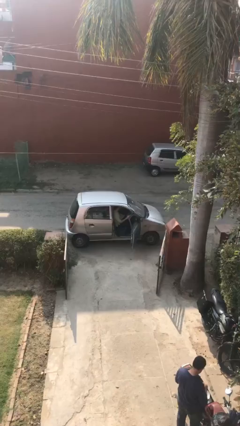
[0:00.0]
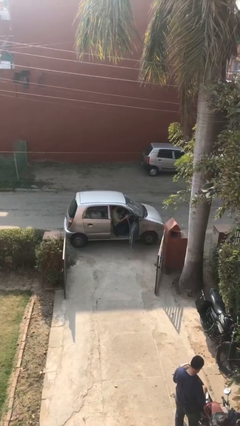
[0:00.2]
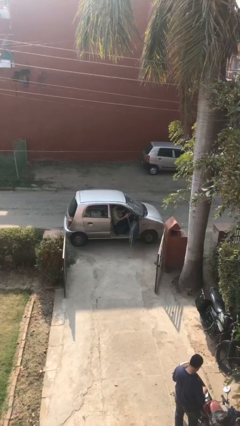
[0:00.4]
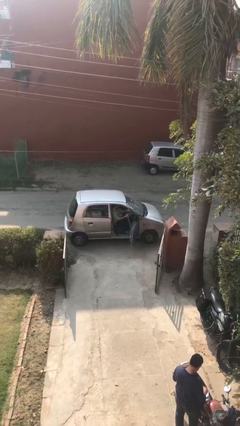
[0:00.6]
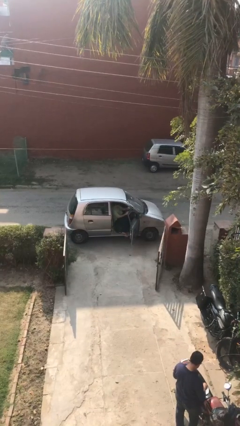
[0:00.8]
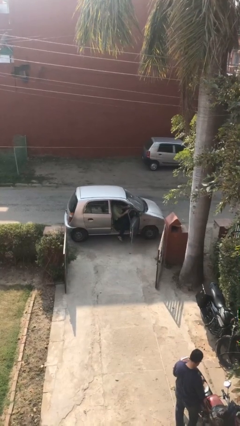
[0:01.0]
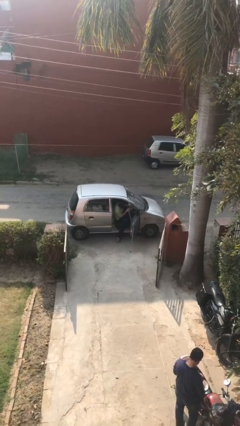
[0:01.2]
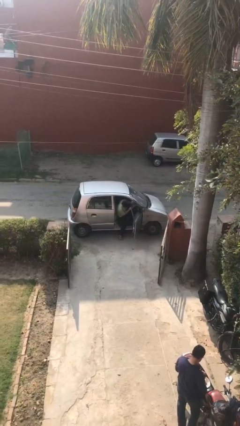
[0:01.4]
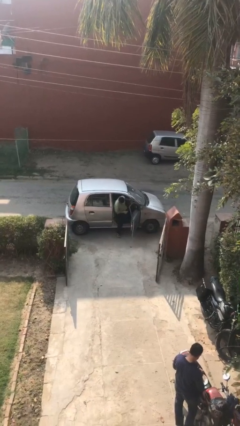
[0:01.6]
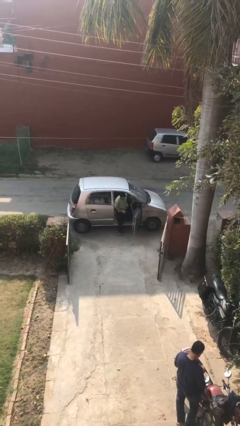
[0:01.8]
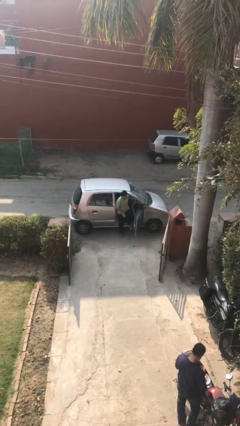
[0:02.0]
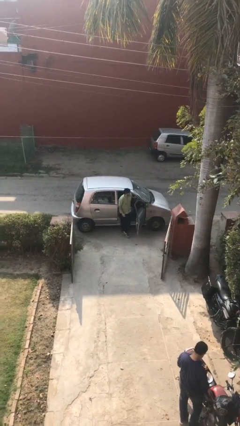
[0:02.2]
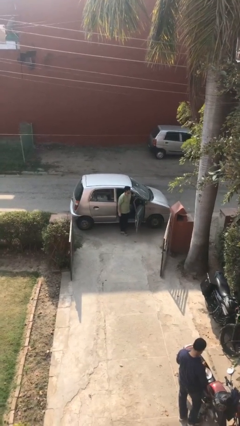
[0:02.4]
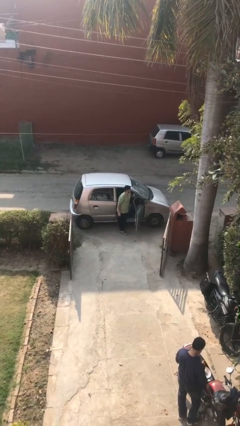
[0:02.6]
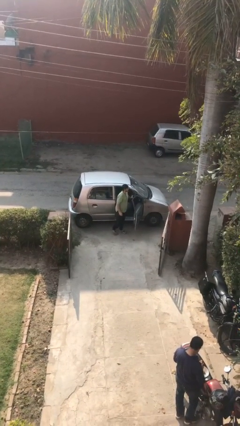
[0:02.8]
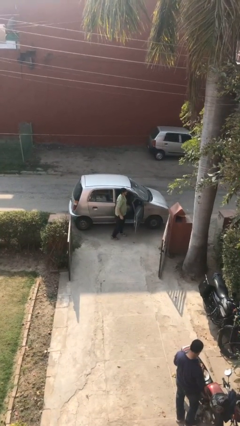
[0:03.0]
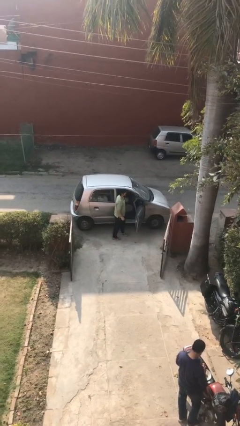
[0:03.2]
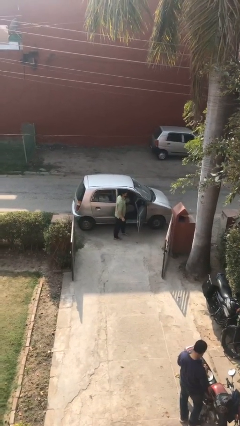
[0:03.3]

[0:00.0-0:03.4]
person exits car

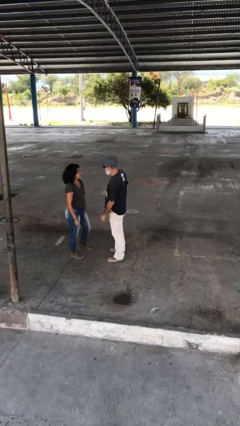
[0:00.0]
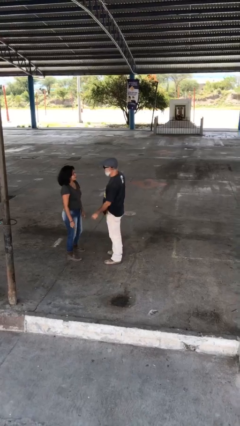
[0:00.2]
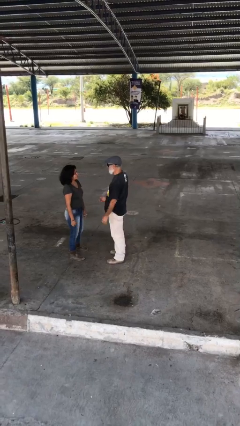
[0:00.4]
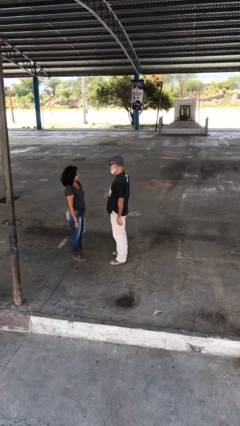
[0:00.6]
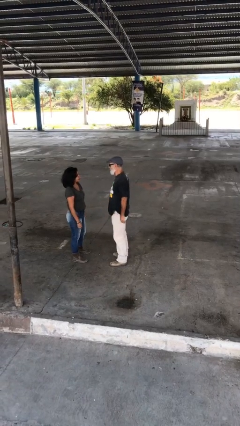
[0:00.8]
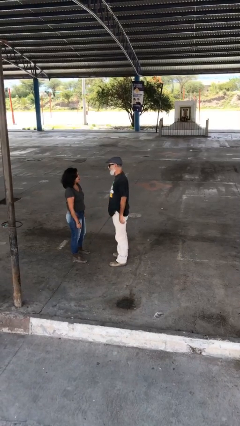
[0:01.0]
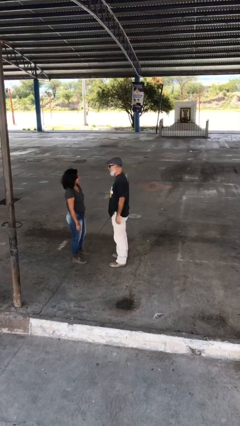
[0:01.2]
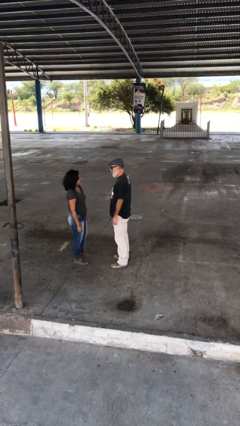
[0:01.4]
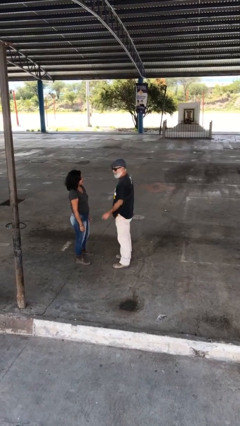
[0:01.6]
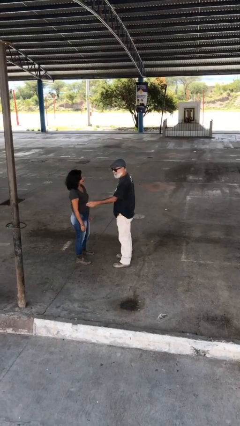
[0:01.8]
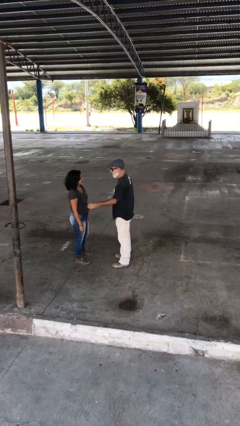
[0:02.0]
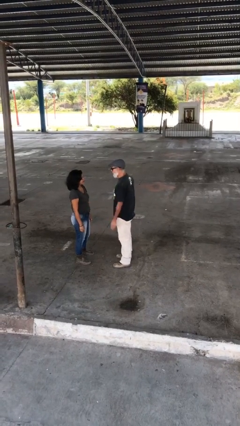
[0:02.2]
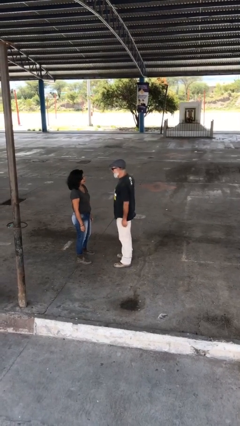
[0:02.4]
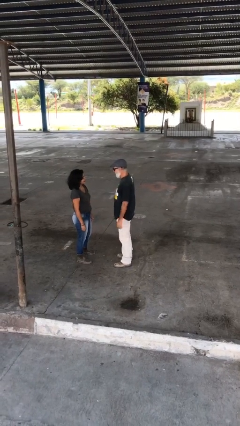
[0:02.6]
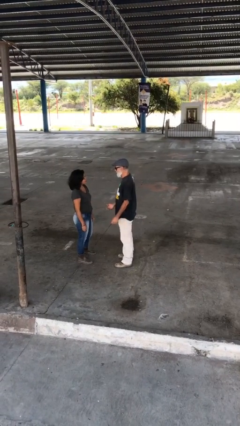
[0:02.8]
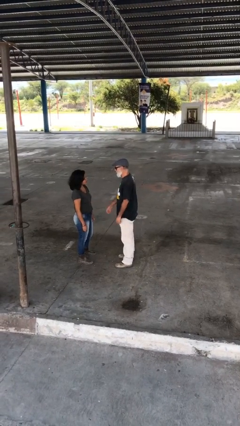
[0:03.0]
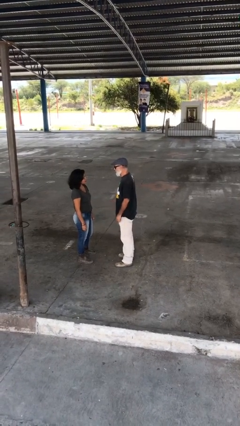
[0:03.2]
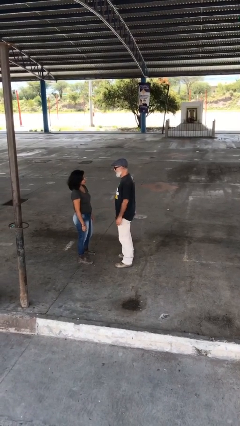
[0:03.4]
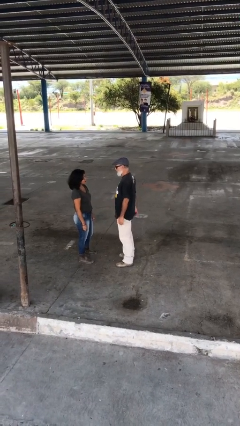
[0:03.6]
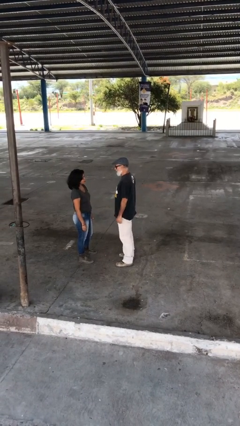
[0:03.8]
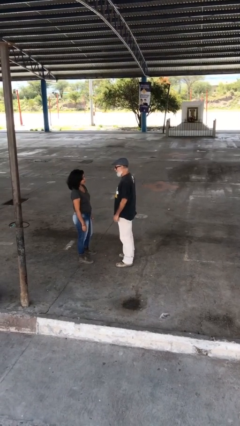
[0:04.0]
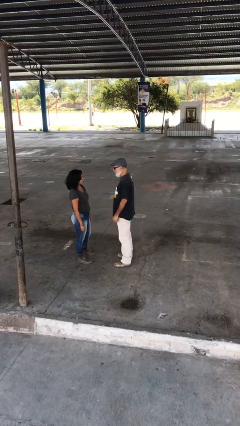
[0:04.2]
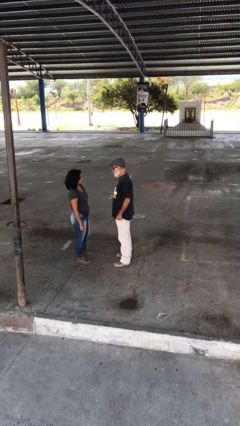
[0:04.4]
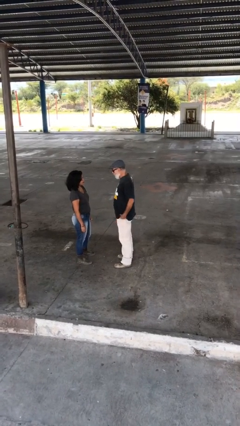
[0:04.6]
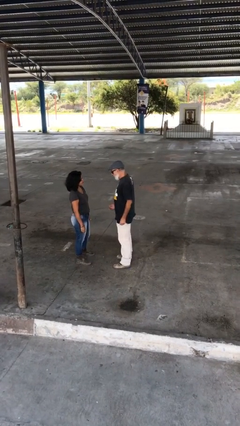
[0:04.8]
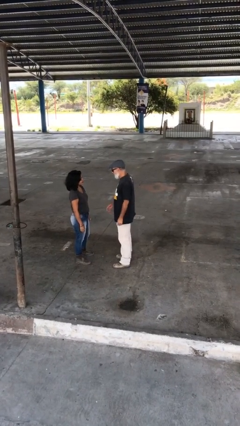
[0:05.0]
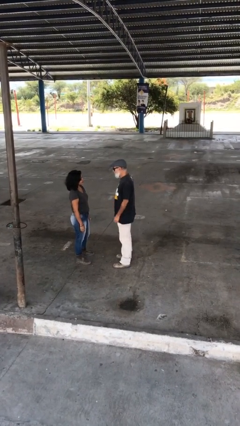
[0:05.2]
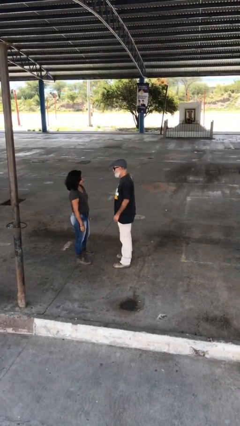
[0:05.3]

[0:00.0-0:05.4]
person talks to person

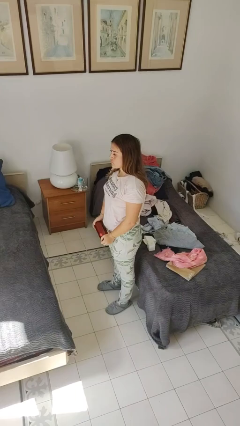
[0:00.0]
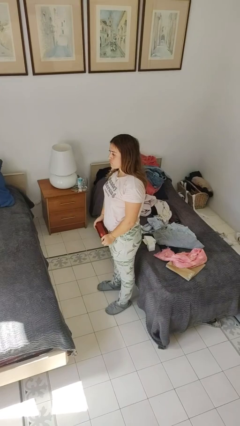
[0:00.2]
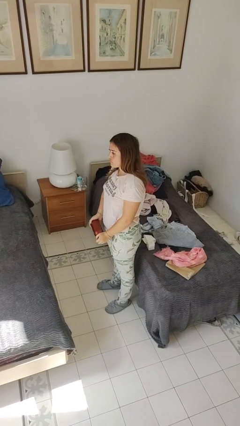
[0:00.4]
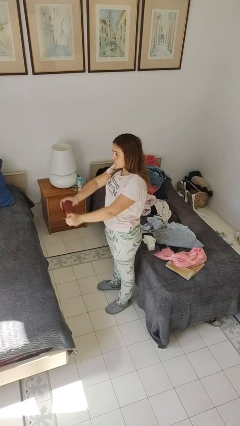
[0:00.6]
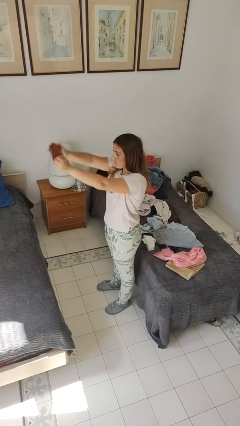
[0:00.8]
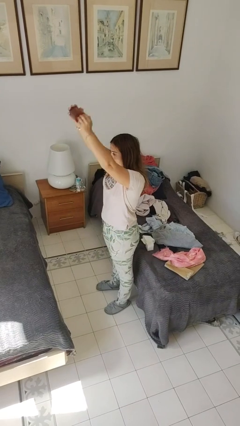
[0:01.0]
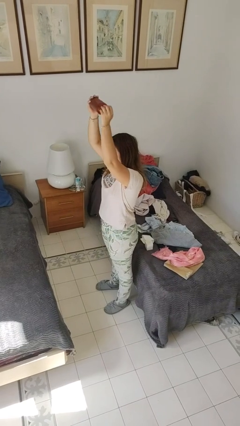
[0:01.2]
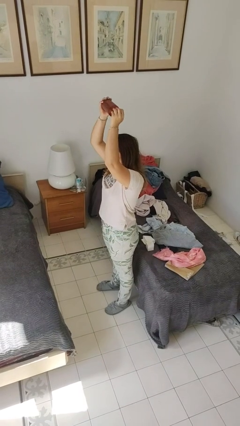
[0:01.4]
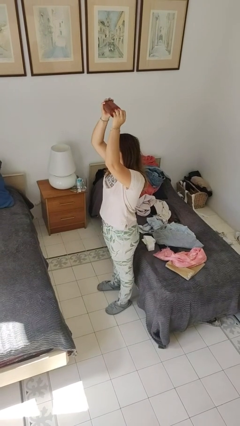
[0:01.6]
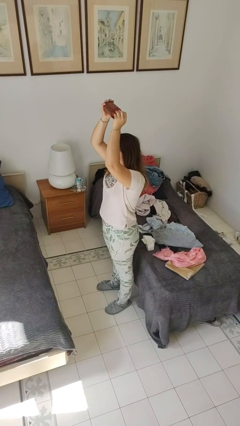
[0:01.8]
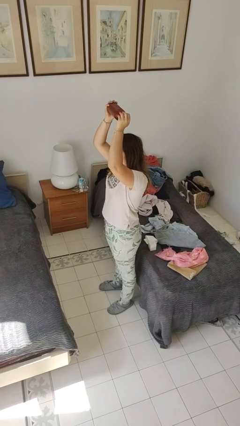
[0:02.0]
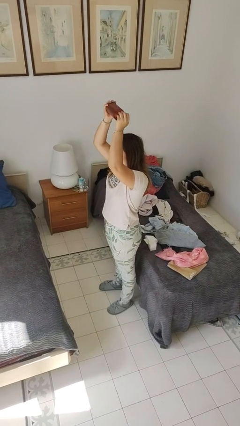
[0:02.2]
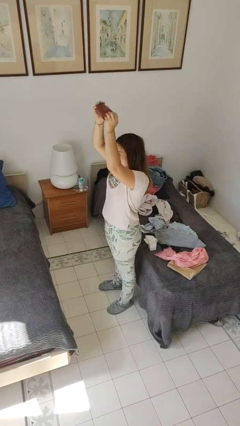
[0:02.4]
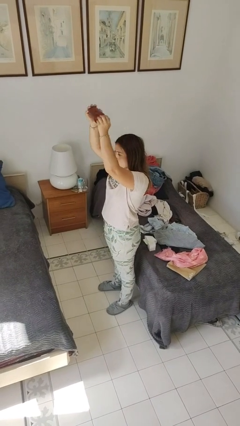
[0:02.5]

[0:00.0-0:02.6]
person holds object above head

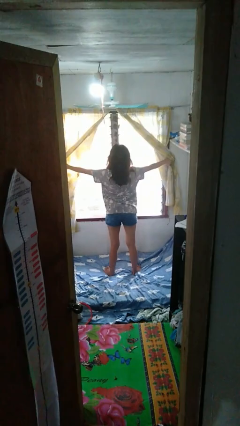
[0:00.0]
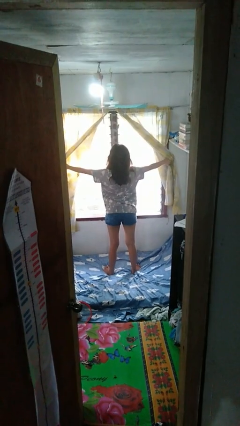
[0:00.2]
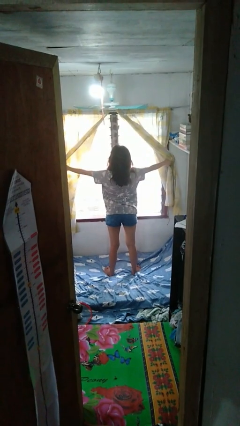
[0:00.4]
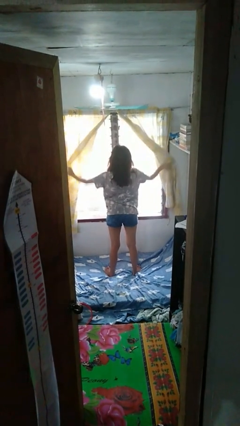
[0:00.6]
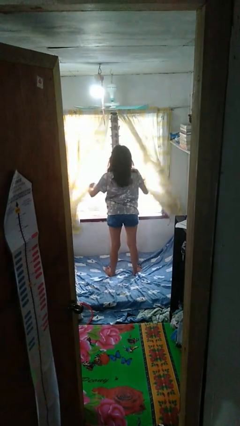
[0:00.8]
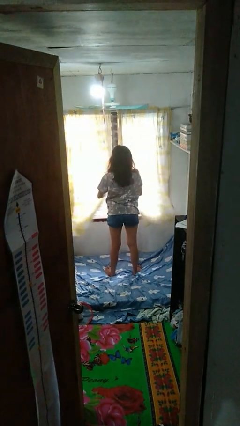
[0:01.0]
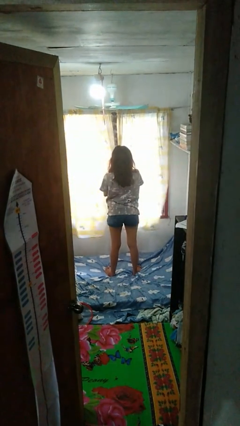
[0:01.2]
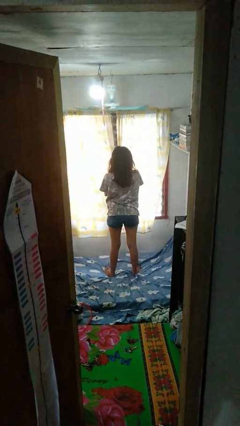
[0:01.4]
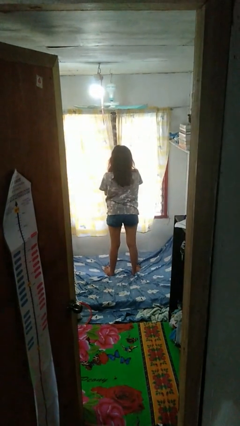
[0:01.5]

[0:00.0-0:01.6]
person closes curtains

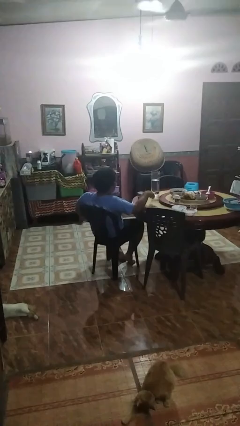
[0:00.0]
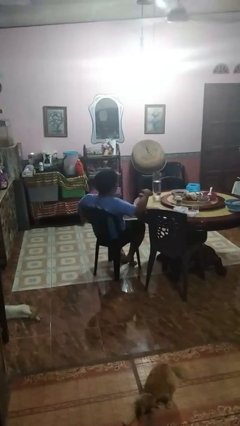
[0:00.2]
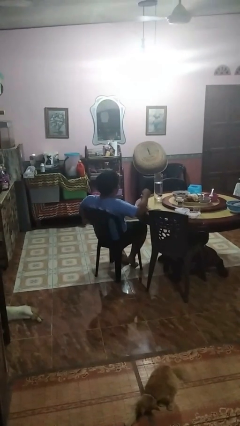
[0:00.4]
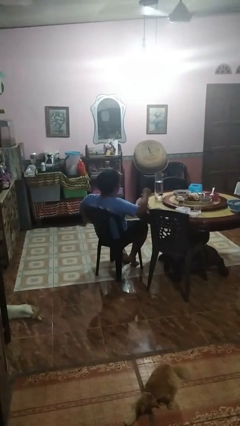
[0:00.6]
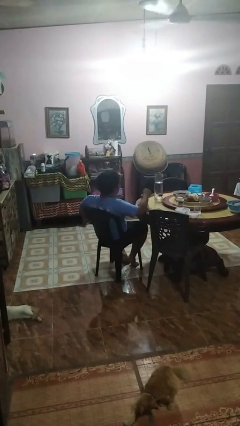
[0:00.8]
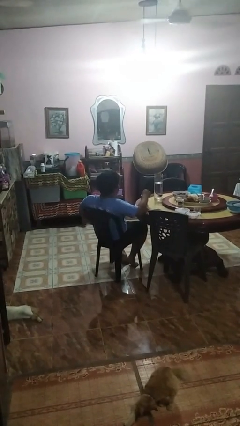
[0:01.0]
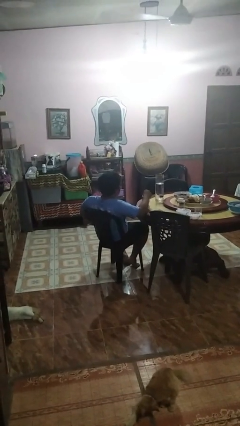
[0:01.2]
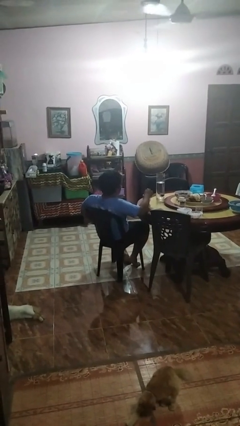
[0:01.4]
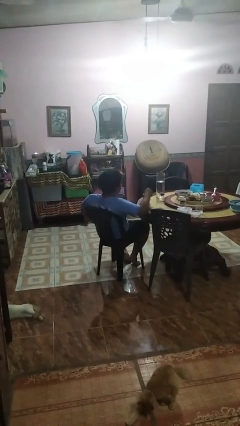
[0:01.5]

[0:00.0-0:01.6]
person stirs mug

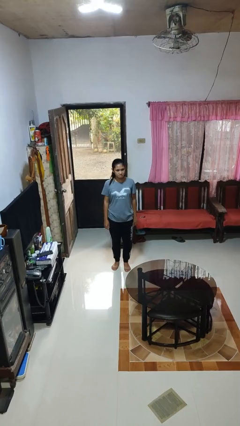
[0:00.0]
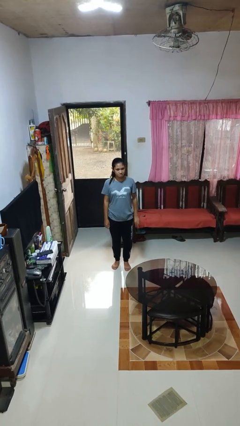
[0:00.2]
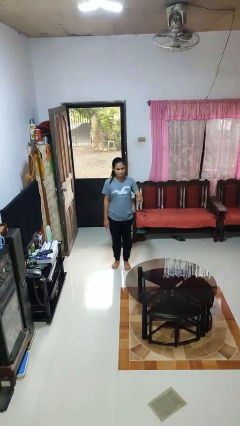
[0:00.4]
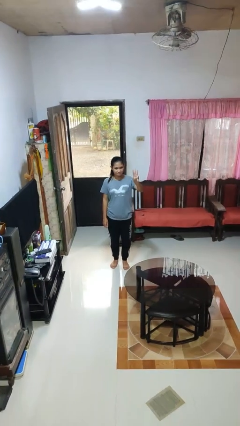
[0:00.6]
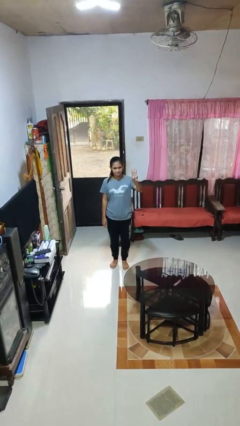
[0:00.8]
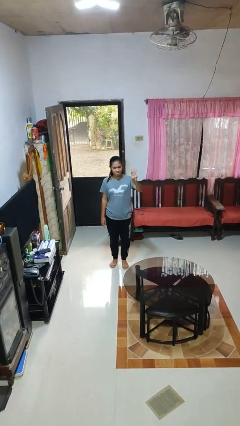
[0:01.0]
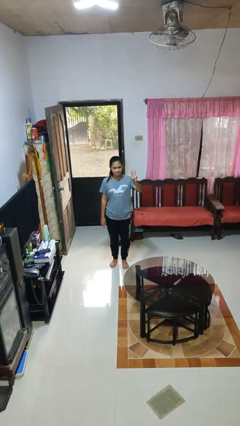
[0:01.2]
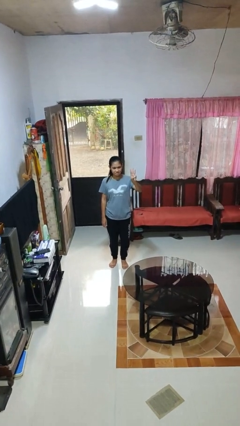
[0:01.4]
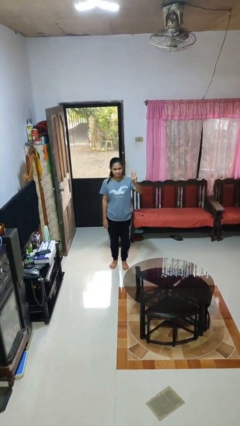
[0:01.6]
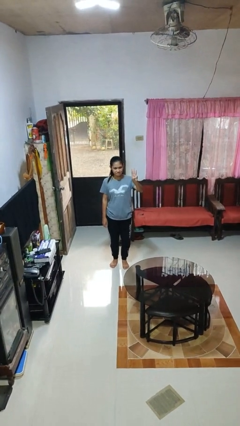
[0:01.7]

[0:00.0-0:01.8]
person gestures number three

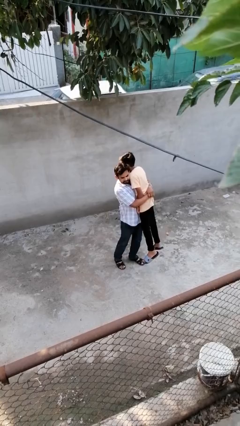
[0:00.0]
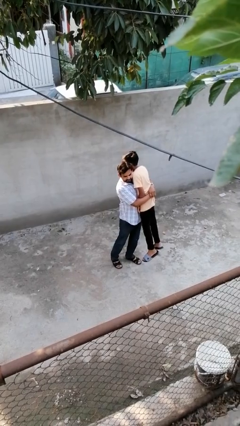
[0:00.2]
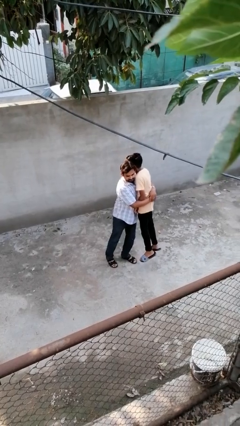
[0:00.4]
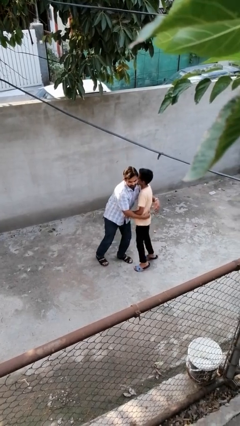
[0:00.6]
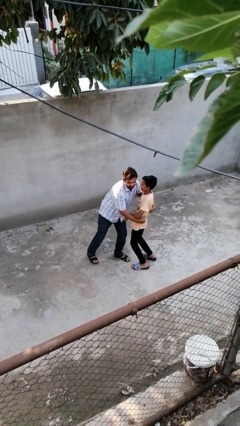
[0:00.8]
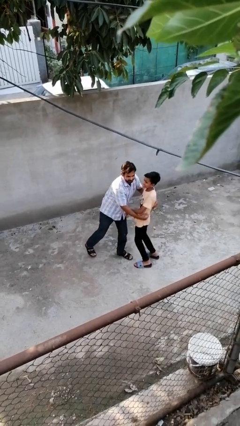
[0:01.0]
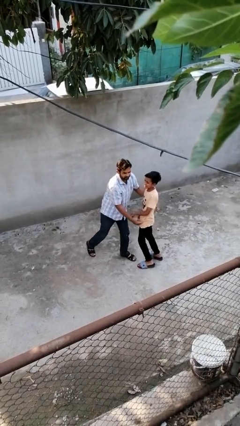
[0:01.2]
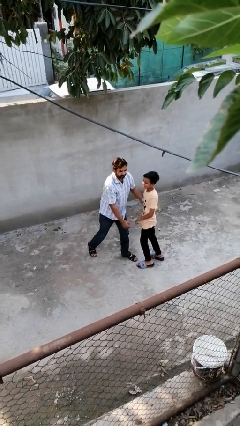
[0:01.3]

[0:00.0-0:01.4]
person puts down person
